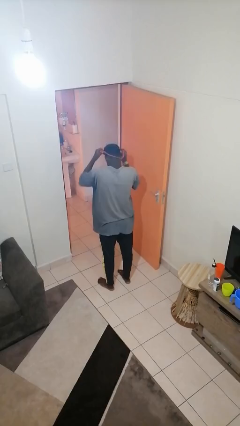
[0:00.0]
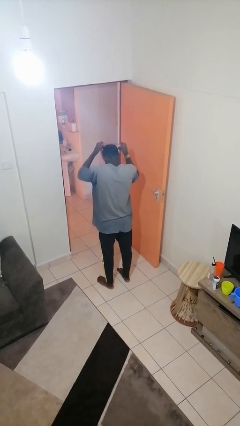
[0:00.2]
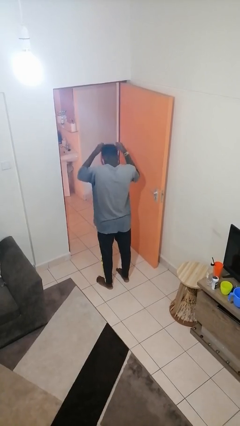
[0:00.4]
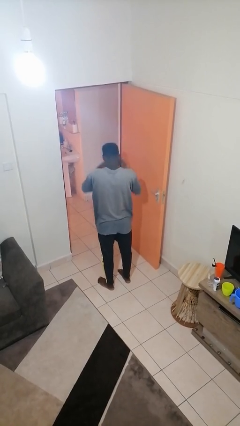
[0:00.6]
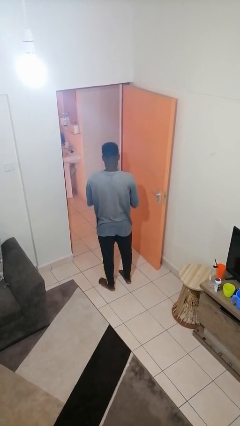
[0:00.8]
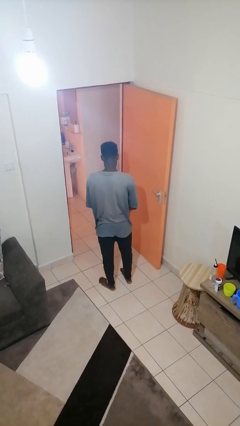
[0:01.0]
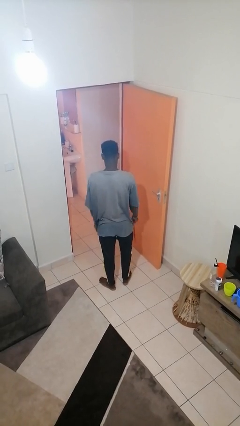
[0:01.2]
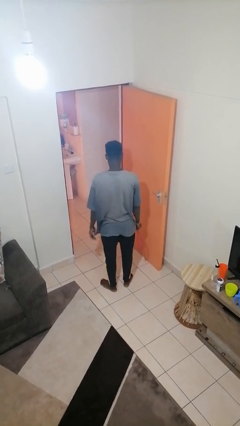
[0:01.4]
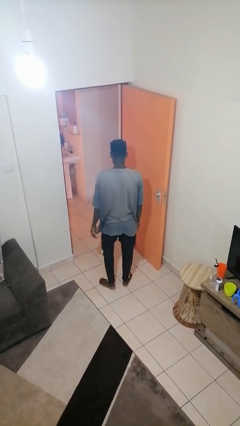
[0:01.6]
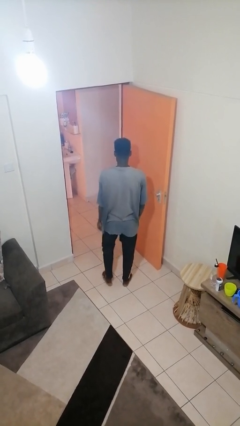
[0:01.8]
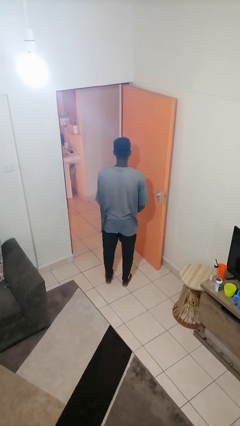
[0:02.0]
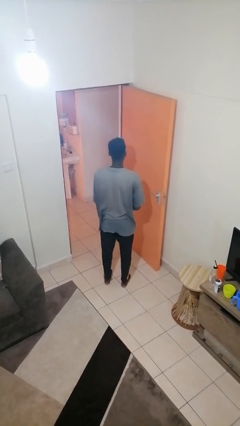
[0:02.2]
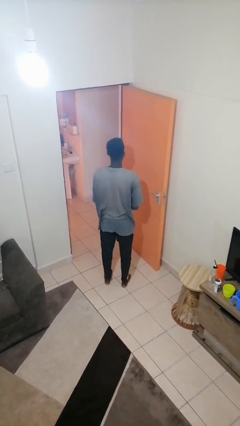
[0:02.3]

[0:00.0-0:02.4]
person takes off necklace

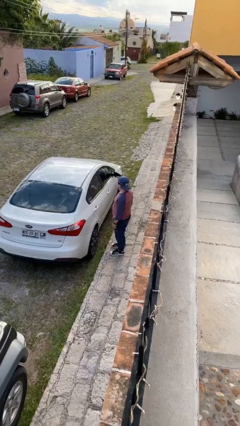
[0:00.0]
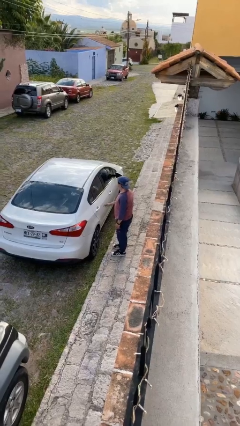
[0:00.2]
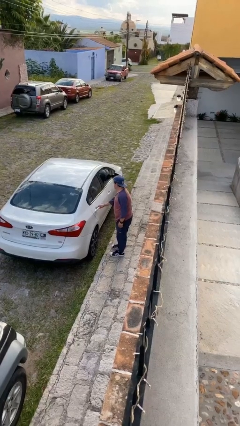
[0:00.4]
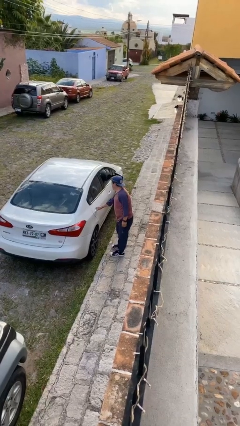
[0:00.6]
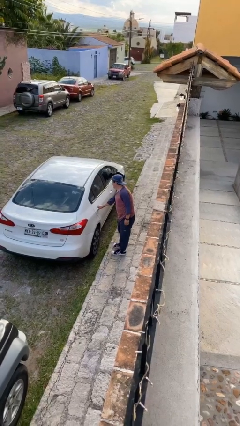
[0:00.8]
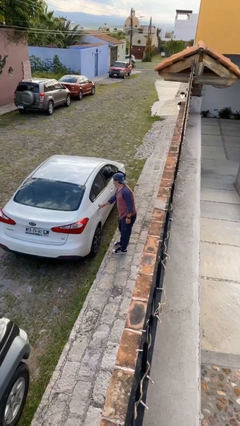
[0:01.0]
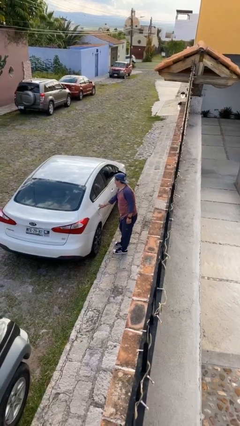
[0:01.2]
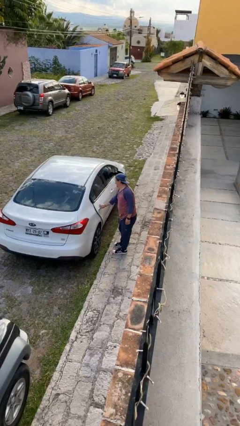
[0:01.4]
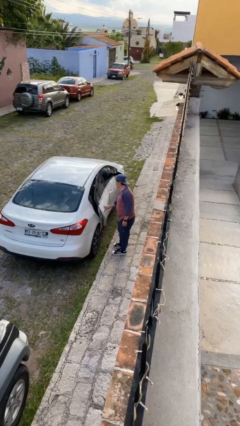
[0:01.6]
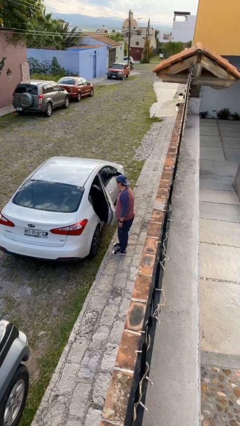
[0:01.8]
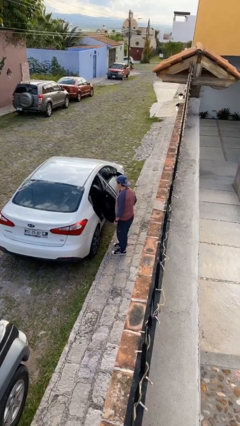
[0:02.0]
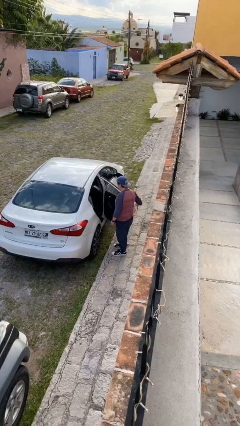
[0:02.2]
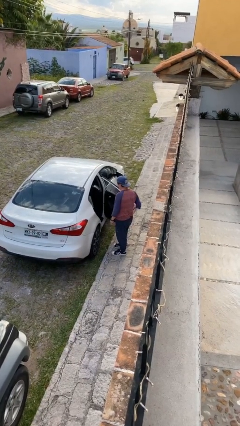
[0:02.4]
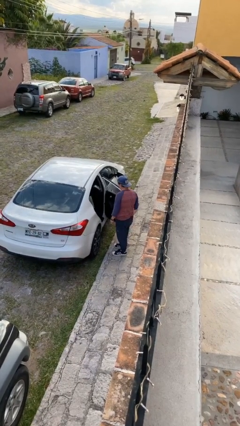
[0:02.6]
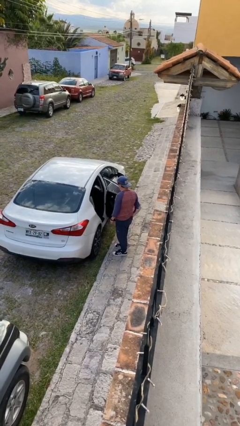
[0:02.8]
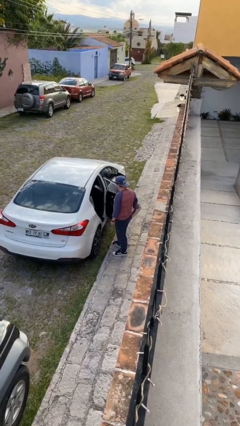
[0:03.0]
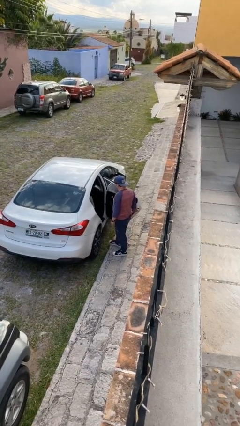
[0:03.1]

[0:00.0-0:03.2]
person opens car door

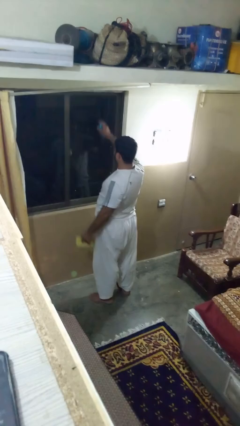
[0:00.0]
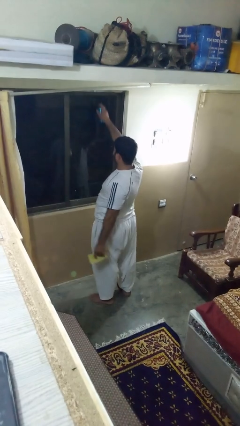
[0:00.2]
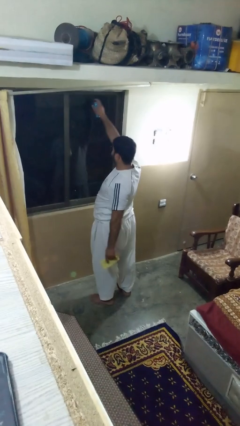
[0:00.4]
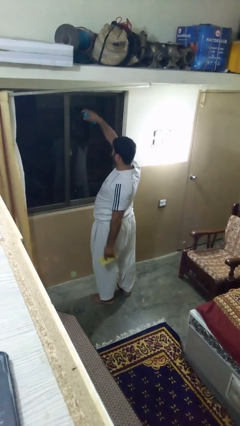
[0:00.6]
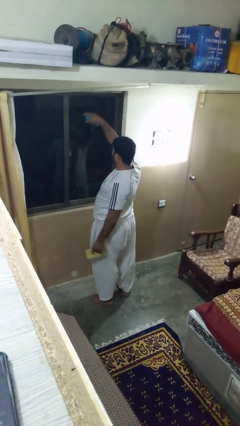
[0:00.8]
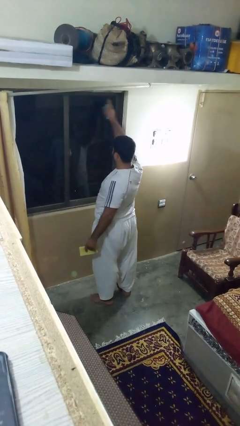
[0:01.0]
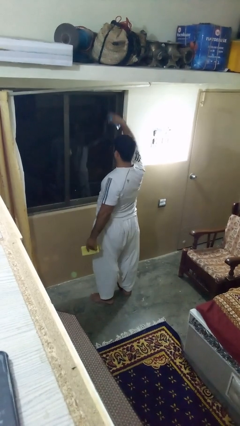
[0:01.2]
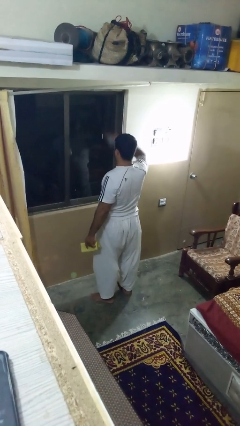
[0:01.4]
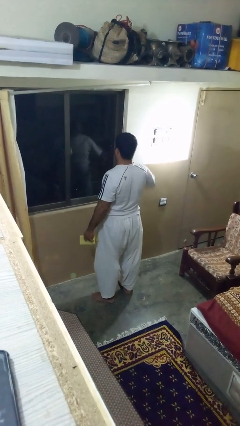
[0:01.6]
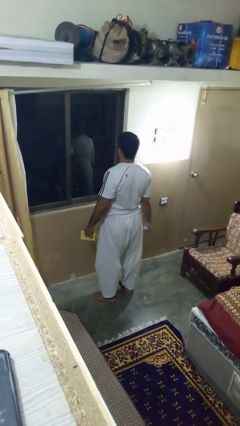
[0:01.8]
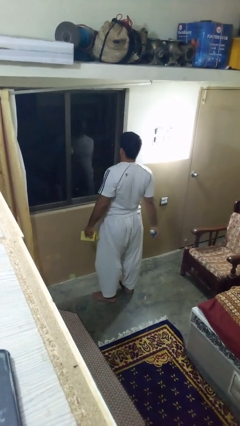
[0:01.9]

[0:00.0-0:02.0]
person sprays from bottle

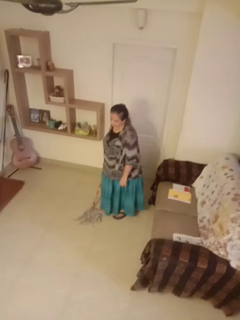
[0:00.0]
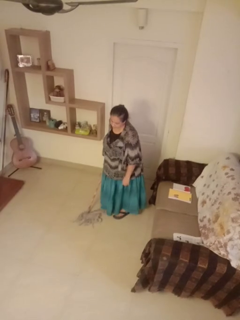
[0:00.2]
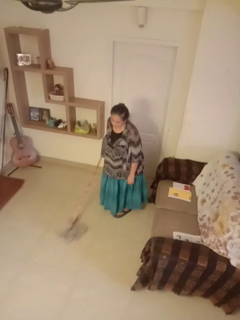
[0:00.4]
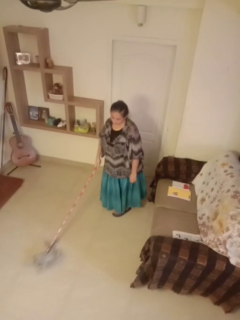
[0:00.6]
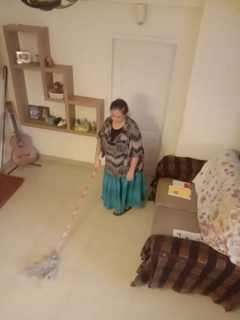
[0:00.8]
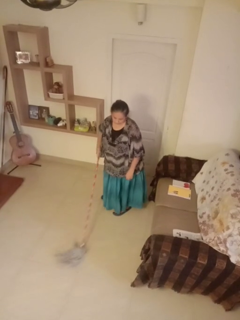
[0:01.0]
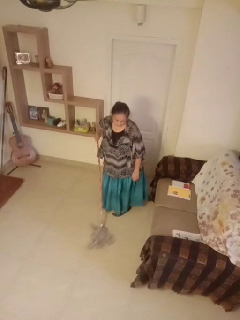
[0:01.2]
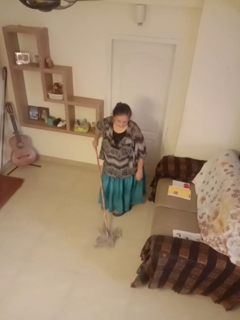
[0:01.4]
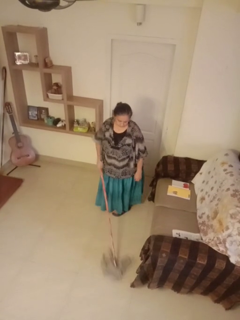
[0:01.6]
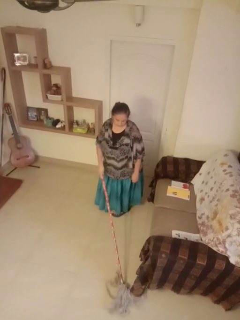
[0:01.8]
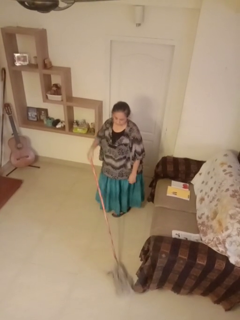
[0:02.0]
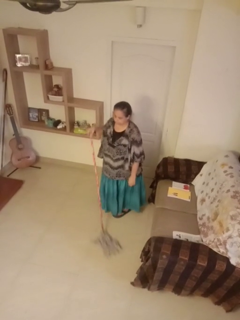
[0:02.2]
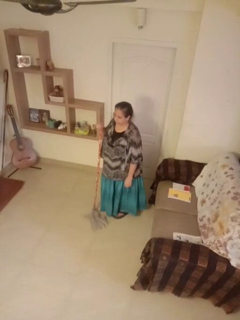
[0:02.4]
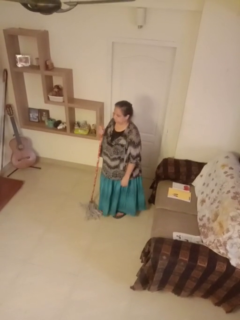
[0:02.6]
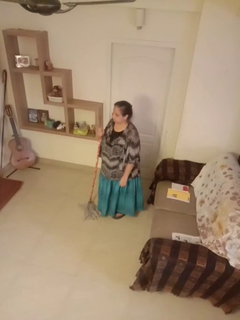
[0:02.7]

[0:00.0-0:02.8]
person mops

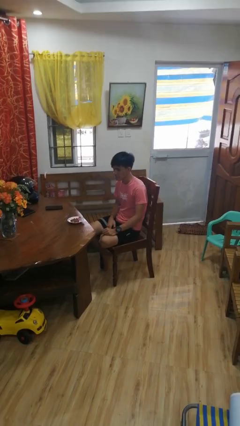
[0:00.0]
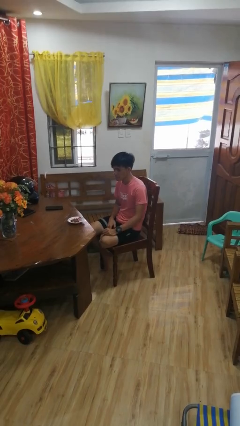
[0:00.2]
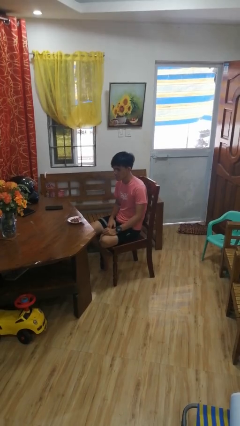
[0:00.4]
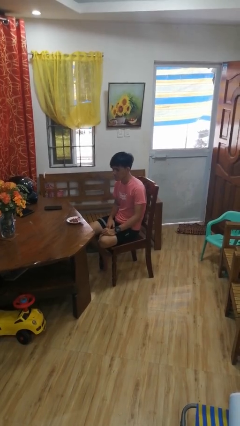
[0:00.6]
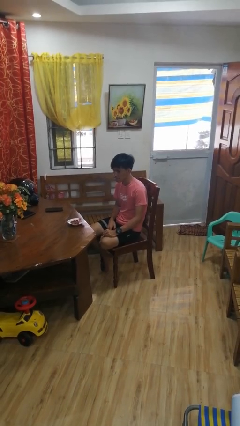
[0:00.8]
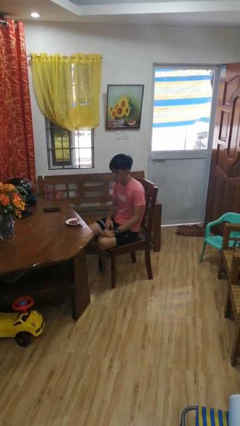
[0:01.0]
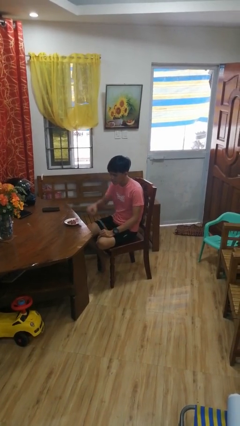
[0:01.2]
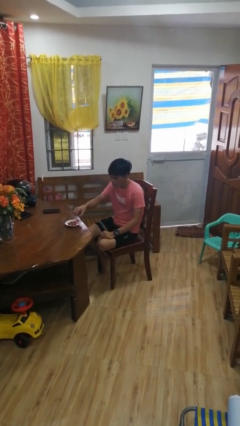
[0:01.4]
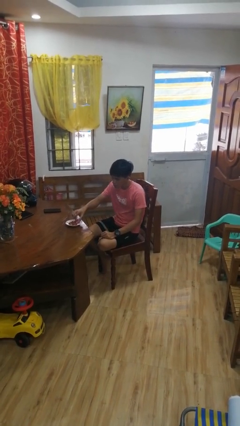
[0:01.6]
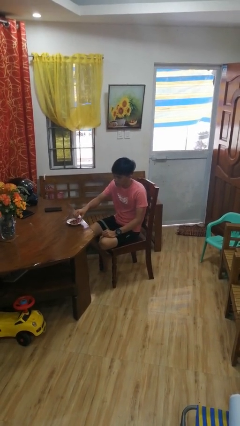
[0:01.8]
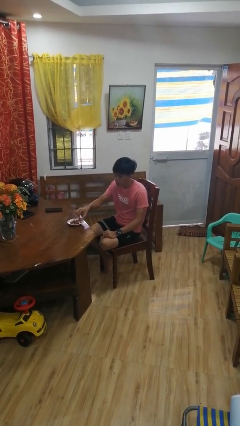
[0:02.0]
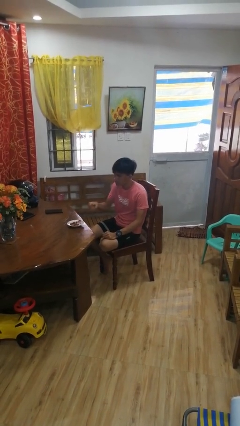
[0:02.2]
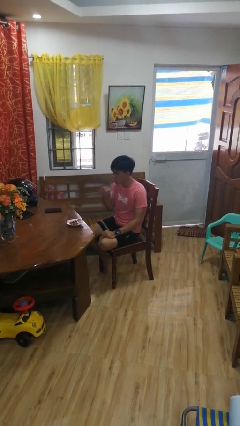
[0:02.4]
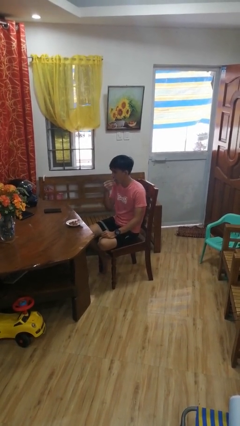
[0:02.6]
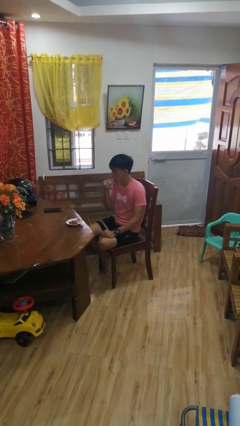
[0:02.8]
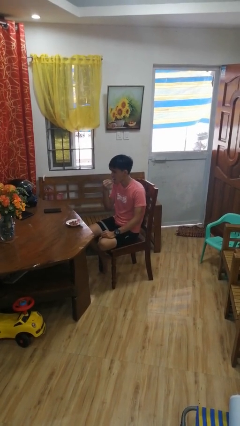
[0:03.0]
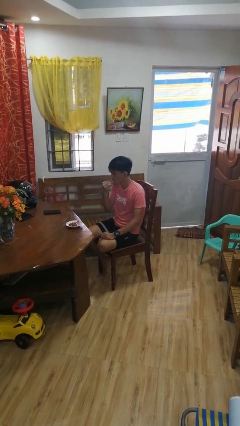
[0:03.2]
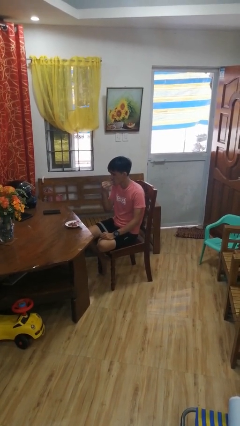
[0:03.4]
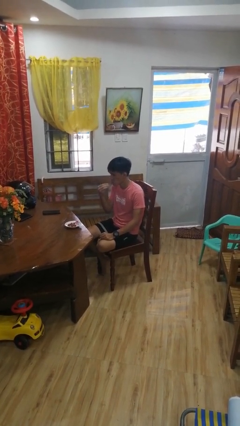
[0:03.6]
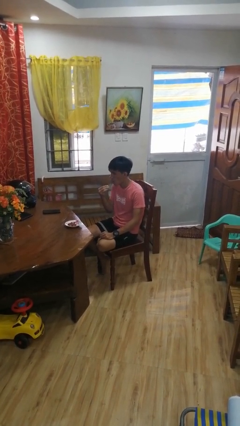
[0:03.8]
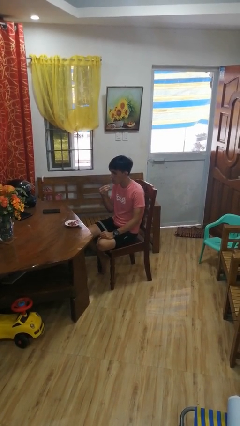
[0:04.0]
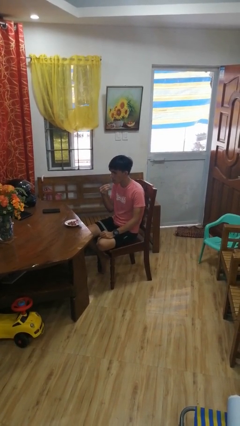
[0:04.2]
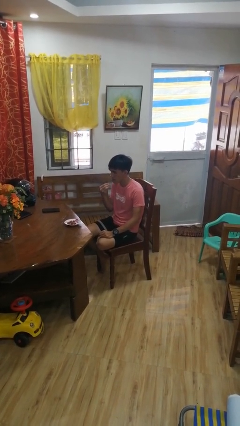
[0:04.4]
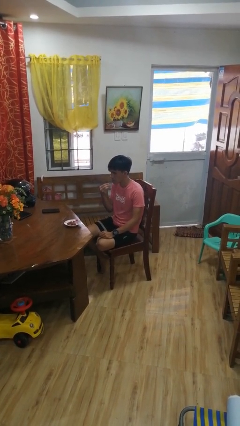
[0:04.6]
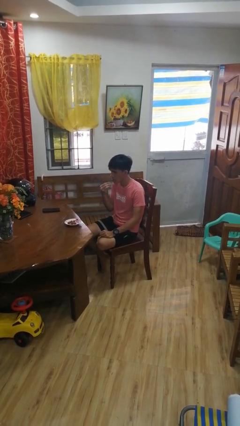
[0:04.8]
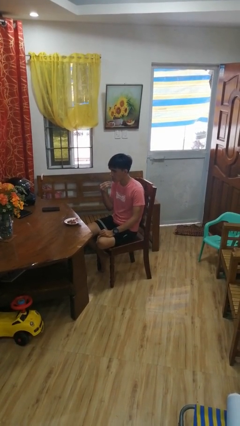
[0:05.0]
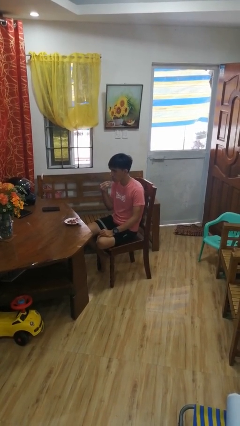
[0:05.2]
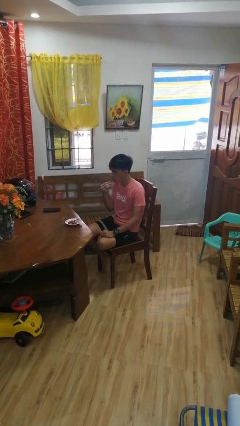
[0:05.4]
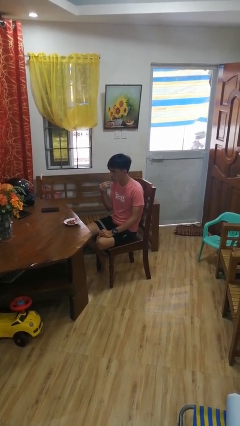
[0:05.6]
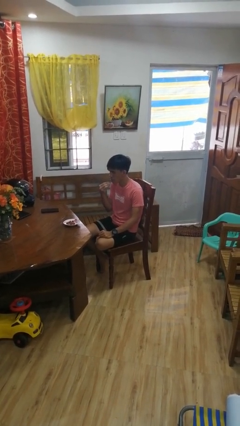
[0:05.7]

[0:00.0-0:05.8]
person eats with hands

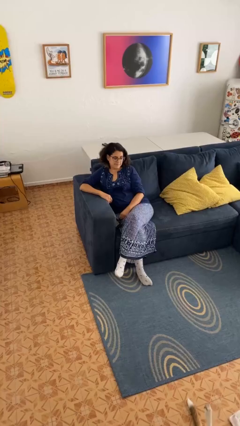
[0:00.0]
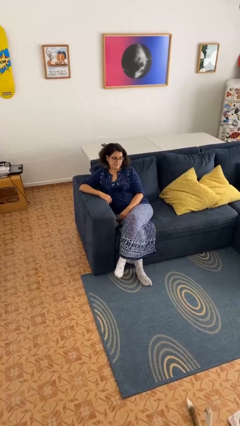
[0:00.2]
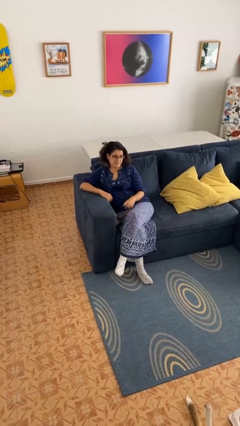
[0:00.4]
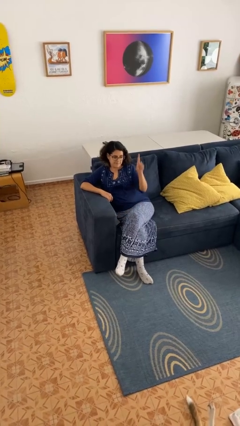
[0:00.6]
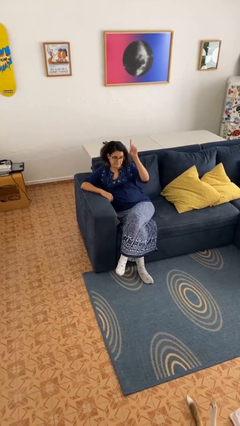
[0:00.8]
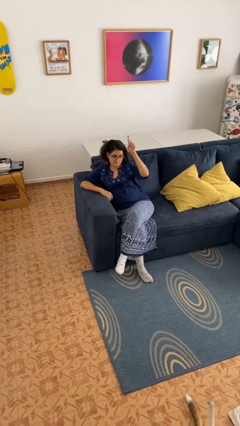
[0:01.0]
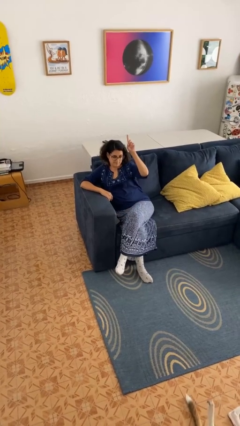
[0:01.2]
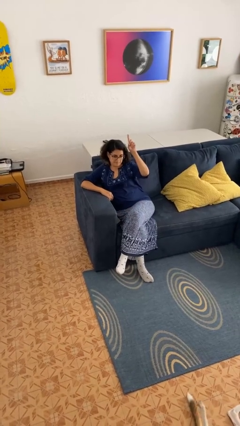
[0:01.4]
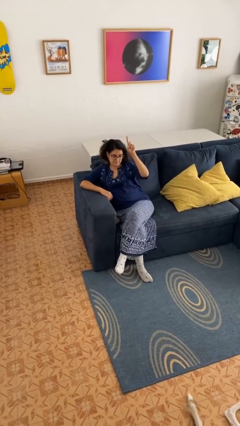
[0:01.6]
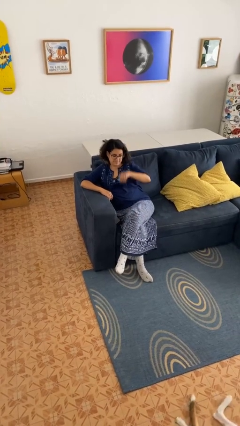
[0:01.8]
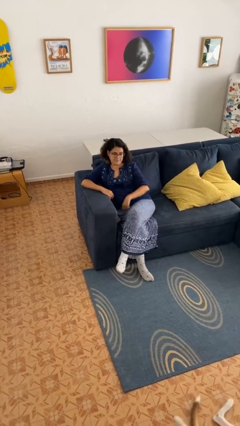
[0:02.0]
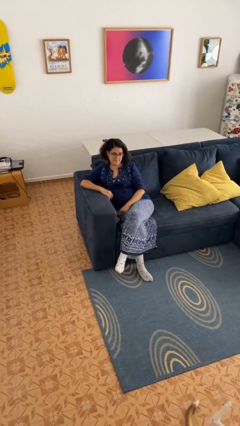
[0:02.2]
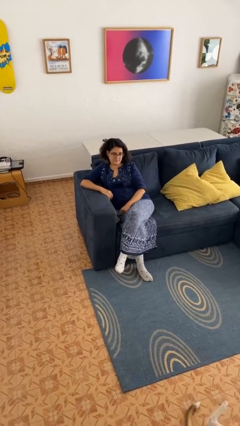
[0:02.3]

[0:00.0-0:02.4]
person gestures number one
